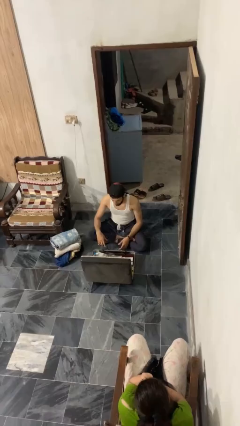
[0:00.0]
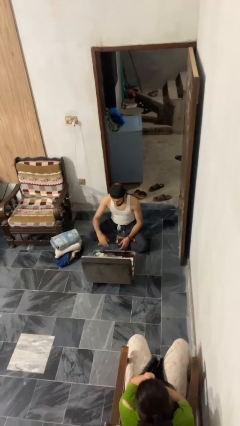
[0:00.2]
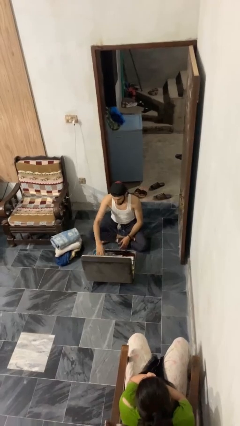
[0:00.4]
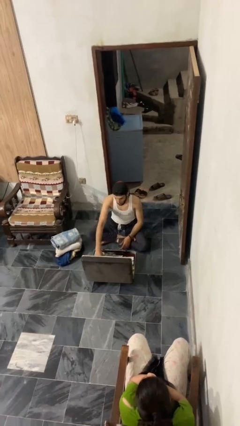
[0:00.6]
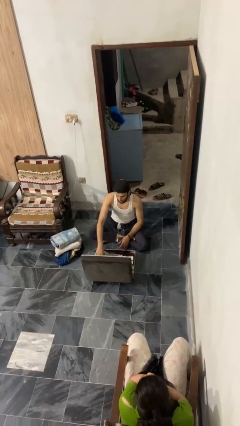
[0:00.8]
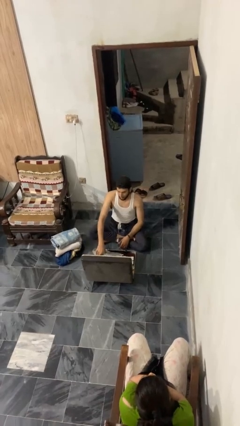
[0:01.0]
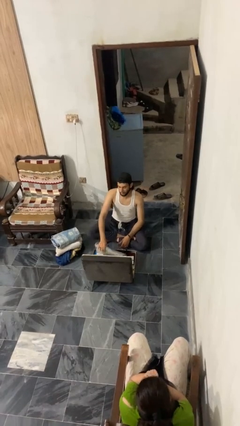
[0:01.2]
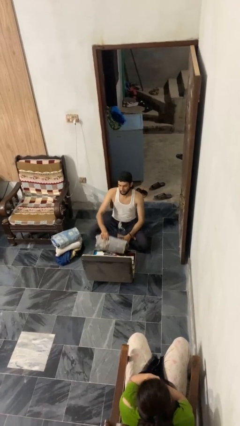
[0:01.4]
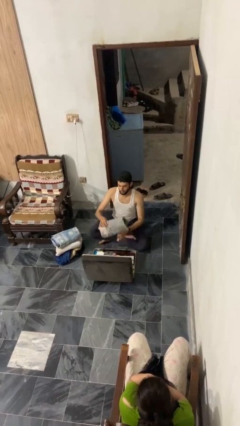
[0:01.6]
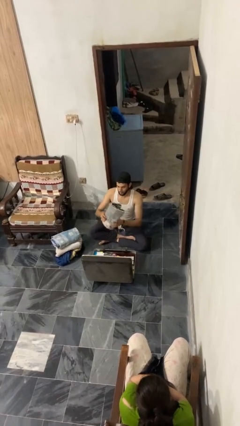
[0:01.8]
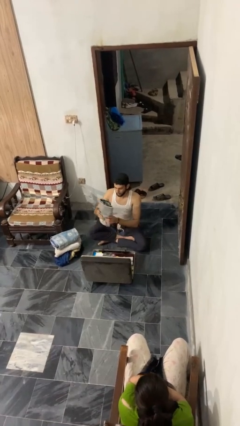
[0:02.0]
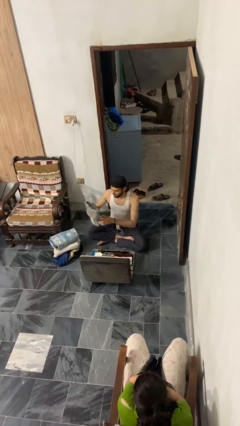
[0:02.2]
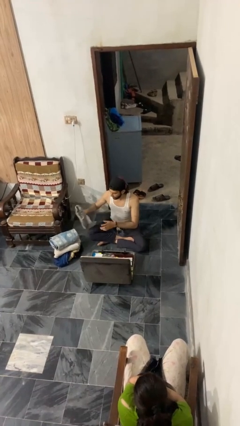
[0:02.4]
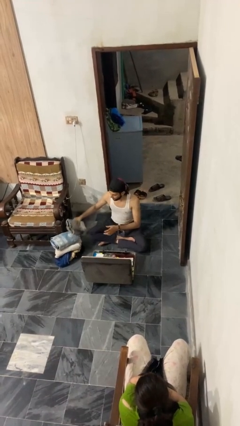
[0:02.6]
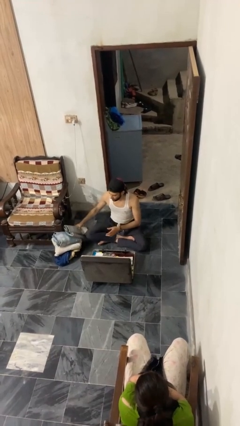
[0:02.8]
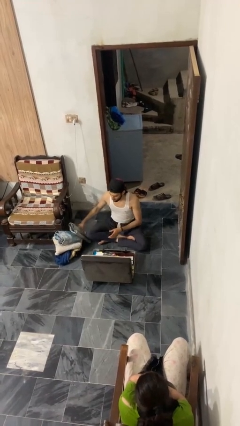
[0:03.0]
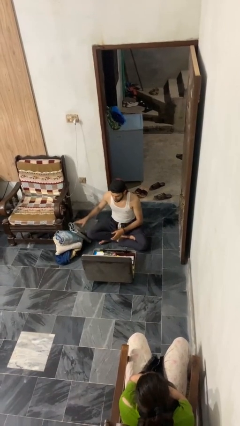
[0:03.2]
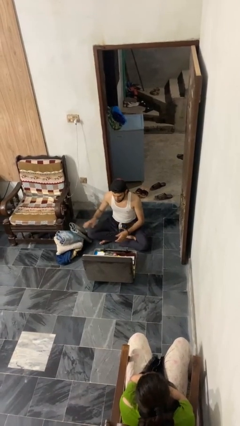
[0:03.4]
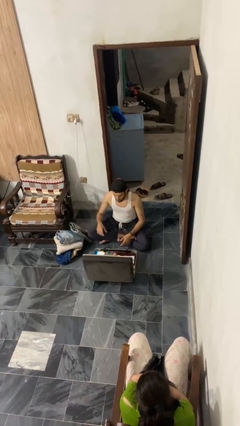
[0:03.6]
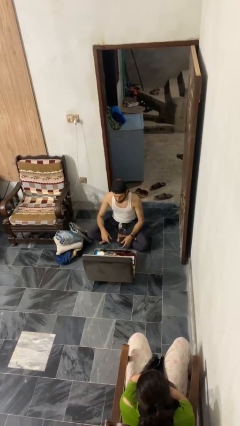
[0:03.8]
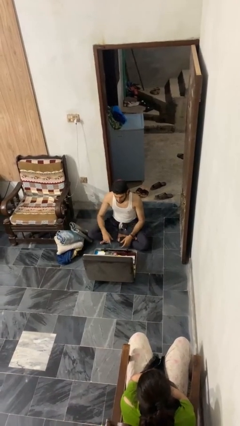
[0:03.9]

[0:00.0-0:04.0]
person unloads clothes from suitcase

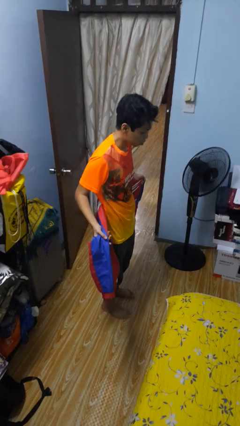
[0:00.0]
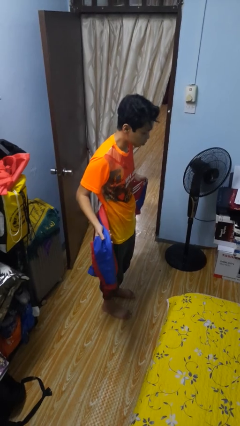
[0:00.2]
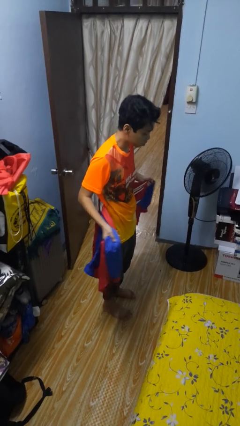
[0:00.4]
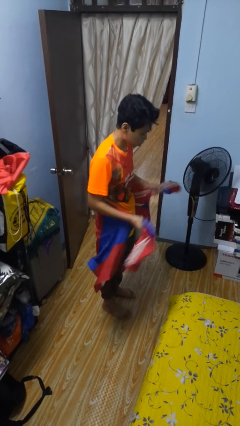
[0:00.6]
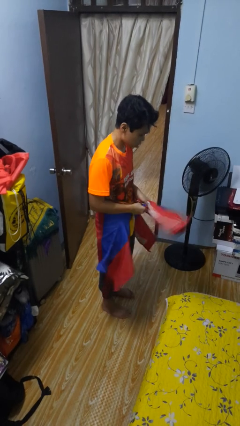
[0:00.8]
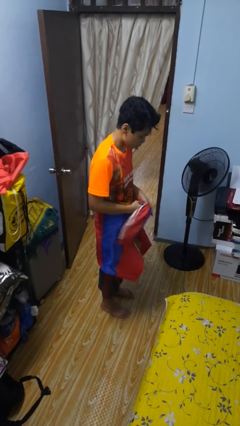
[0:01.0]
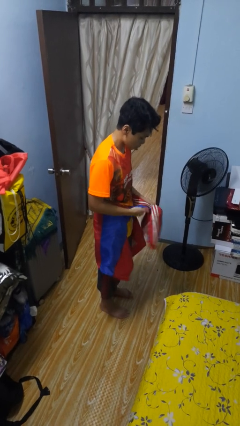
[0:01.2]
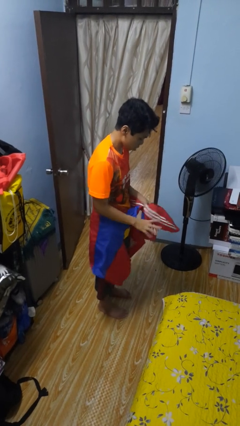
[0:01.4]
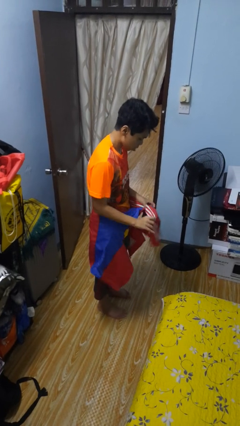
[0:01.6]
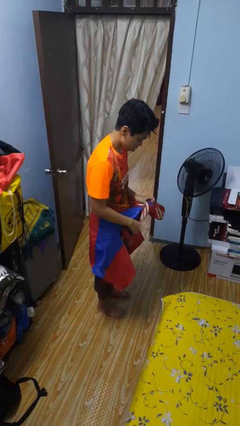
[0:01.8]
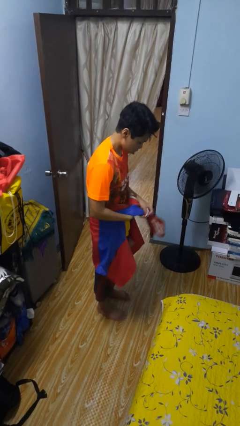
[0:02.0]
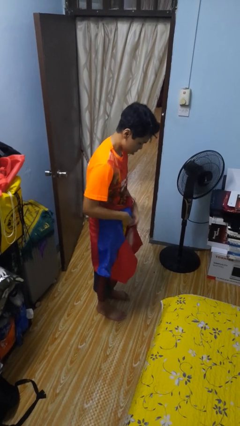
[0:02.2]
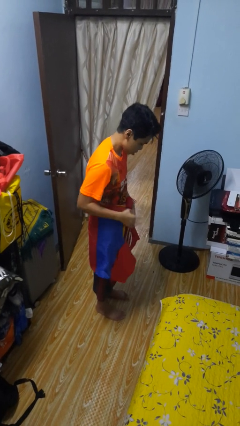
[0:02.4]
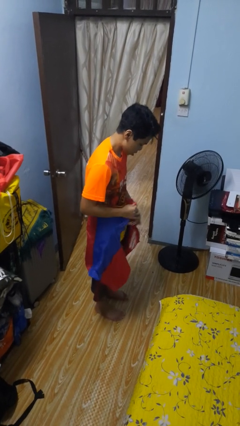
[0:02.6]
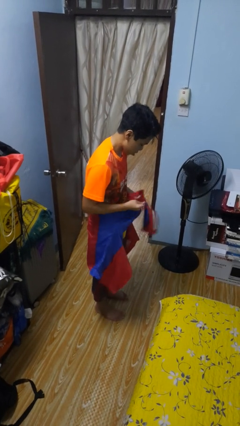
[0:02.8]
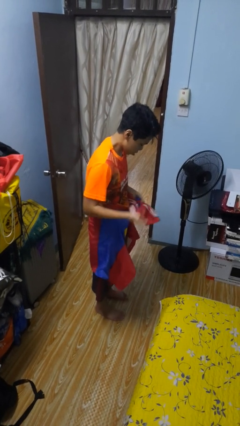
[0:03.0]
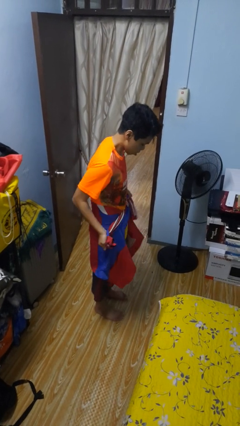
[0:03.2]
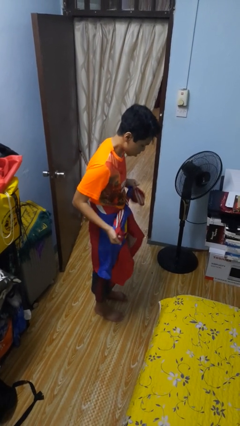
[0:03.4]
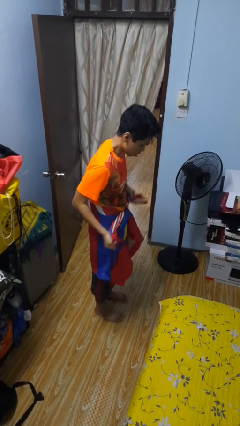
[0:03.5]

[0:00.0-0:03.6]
person ties jacket around waist

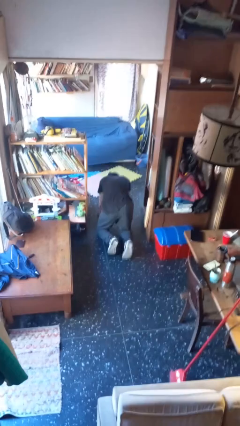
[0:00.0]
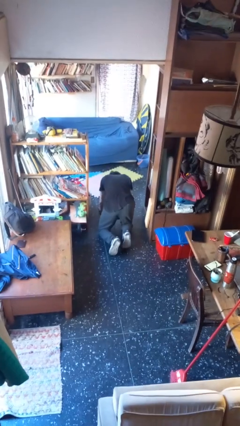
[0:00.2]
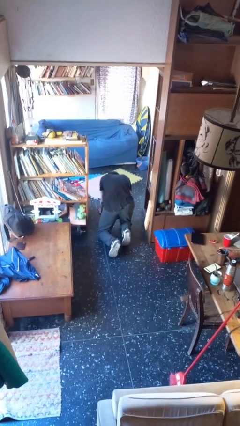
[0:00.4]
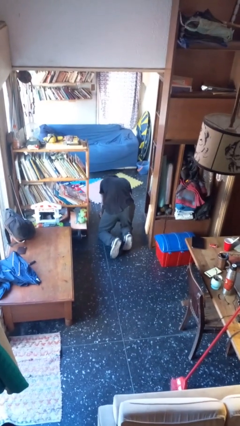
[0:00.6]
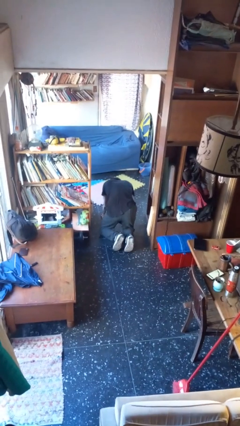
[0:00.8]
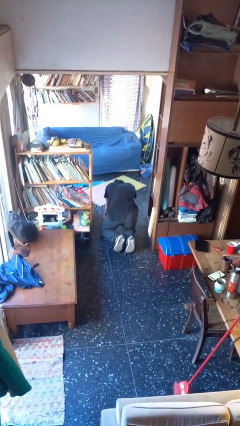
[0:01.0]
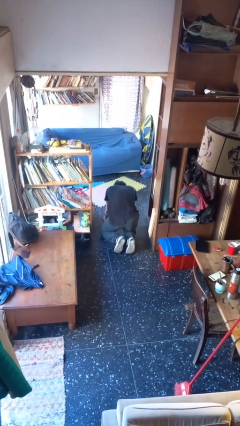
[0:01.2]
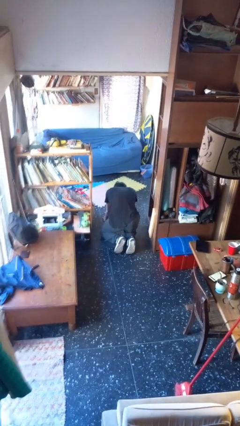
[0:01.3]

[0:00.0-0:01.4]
person crawls

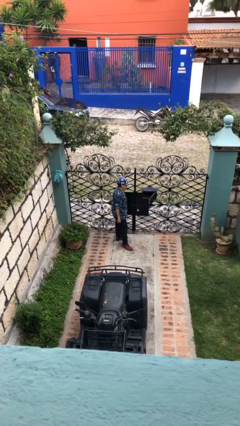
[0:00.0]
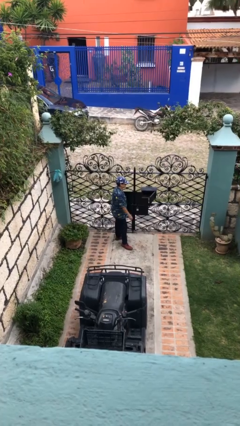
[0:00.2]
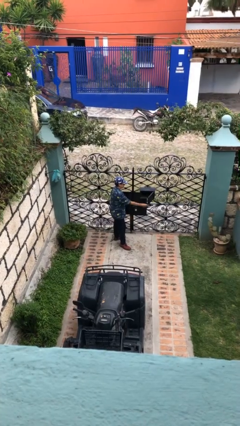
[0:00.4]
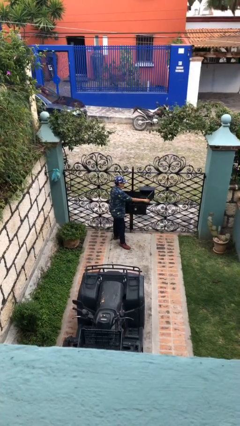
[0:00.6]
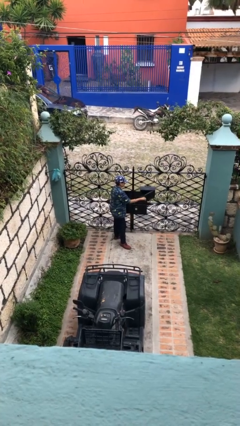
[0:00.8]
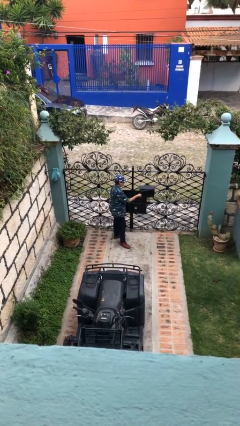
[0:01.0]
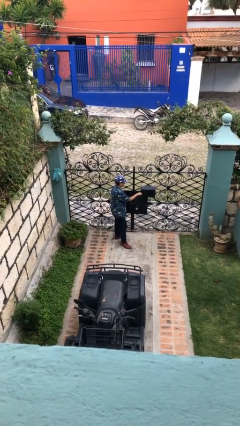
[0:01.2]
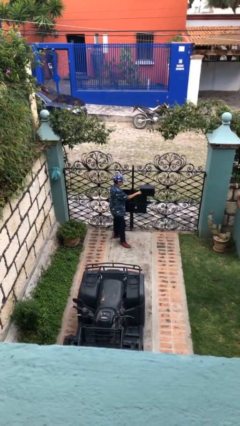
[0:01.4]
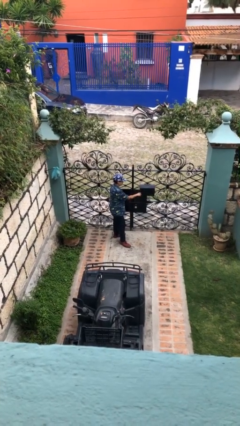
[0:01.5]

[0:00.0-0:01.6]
person closes mailbox

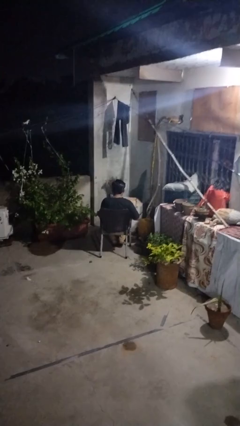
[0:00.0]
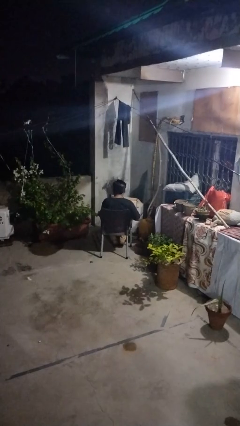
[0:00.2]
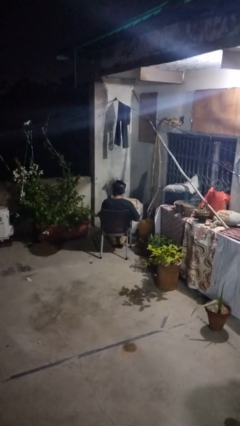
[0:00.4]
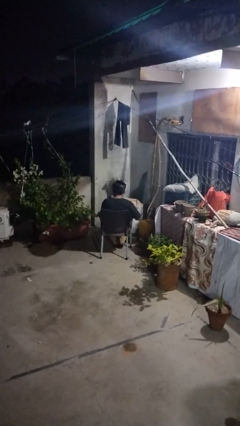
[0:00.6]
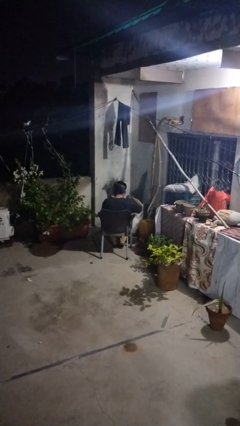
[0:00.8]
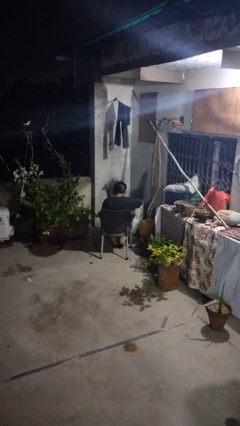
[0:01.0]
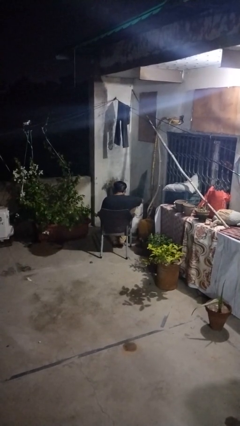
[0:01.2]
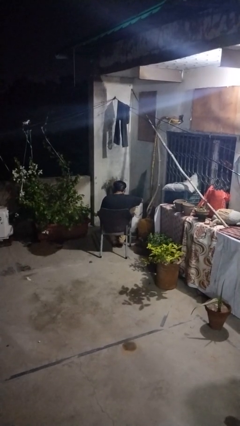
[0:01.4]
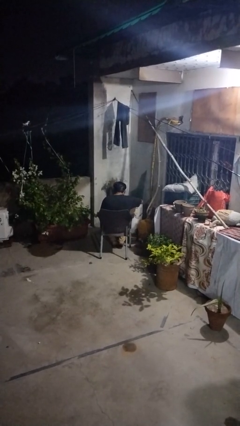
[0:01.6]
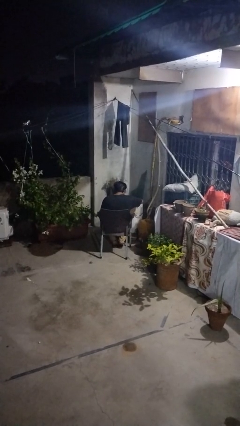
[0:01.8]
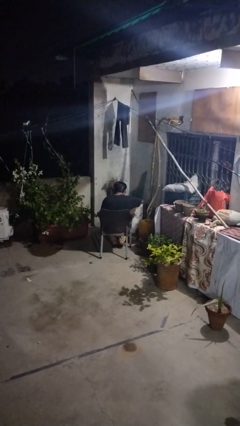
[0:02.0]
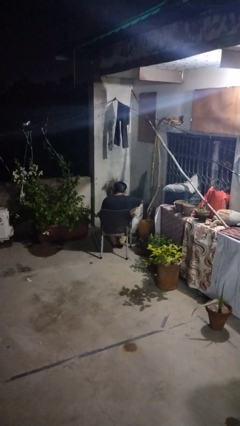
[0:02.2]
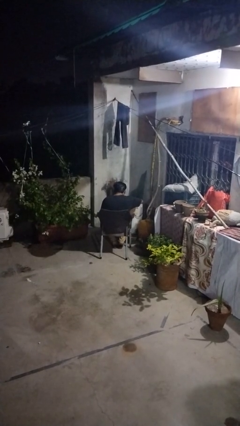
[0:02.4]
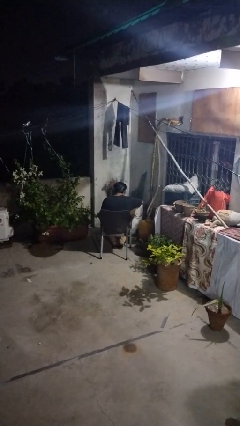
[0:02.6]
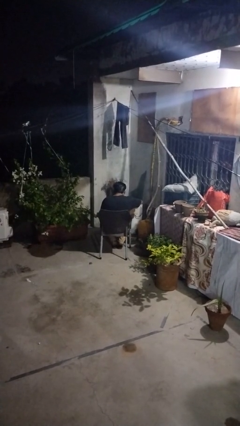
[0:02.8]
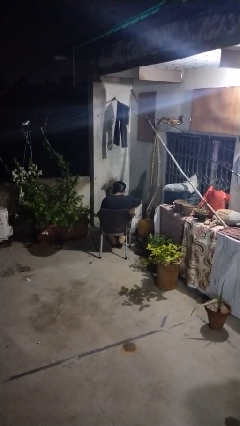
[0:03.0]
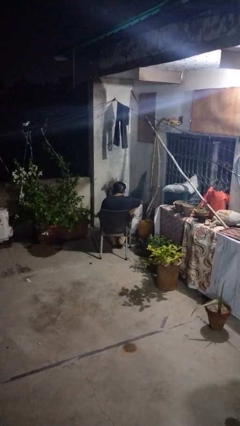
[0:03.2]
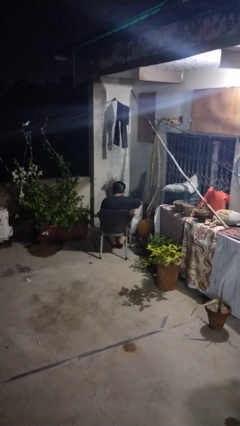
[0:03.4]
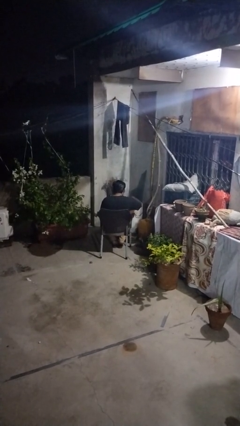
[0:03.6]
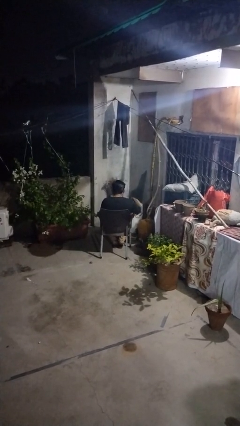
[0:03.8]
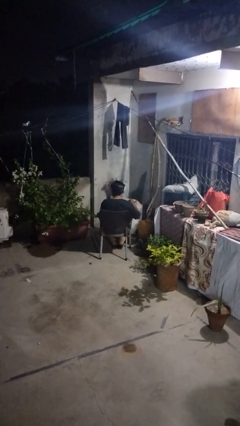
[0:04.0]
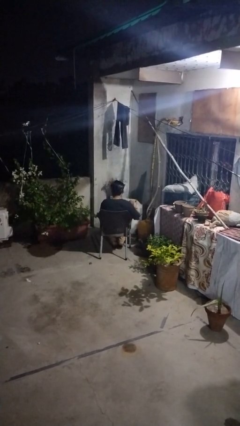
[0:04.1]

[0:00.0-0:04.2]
person searches in box

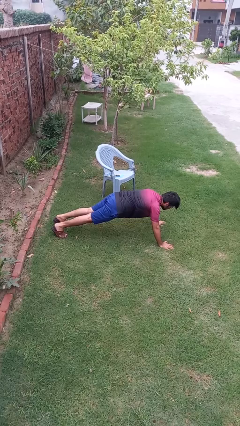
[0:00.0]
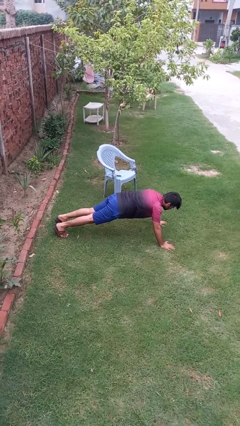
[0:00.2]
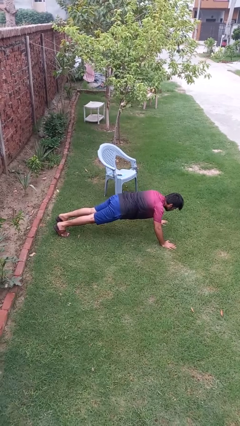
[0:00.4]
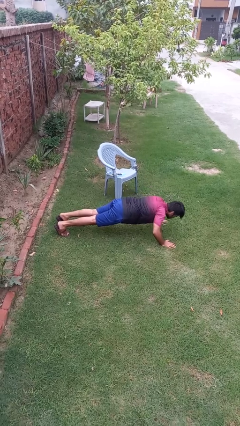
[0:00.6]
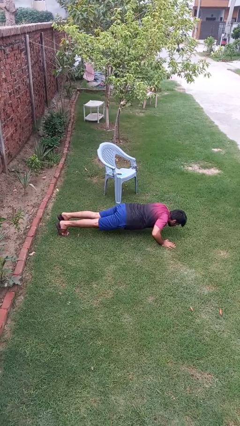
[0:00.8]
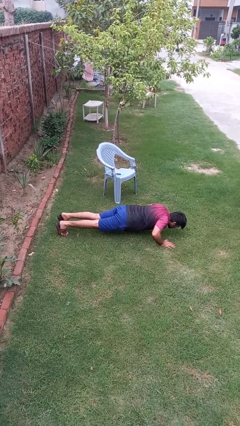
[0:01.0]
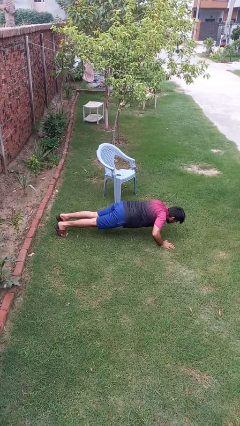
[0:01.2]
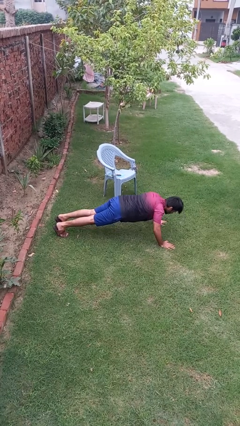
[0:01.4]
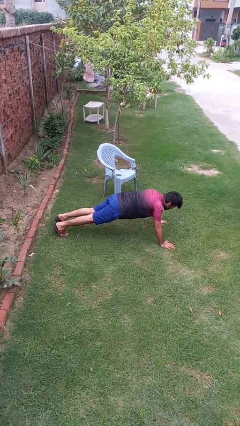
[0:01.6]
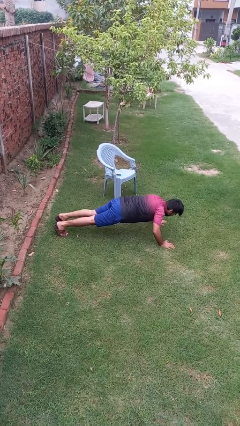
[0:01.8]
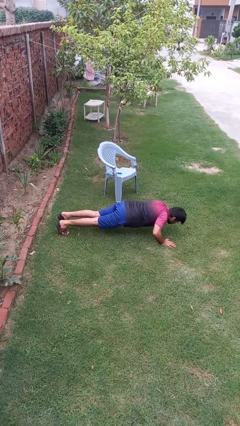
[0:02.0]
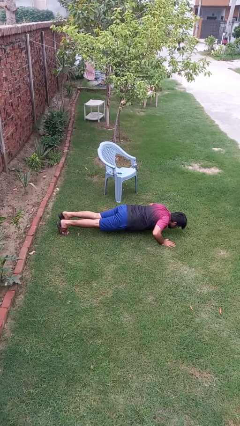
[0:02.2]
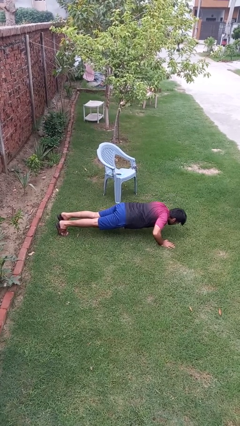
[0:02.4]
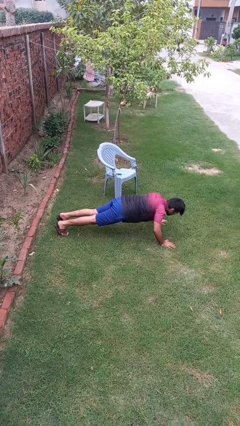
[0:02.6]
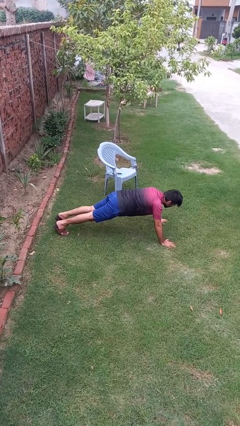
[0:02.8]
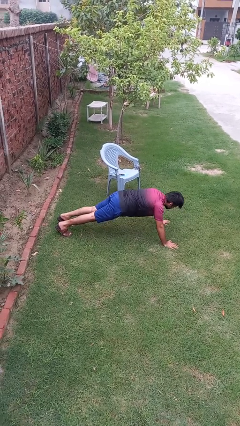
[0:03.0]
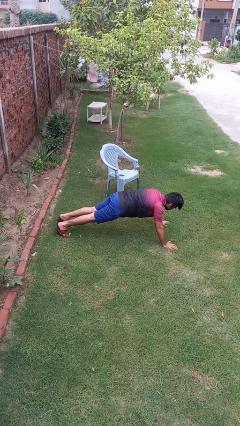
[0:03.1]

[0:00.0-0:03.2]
person exercises with pushup
